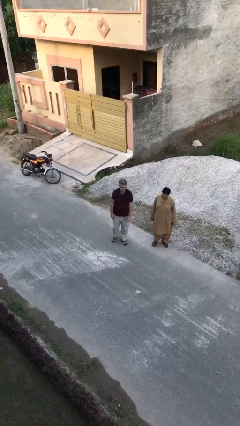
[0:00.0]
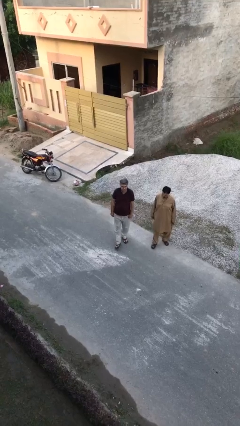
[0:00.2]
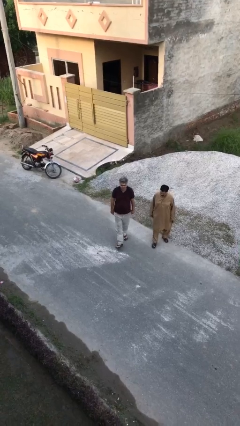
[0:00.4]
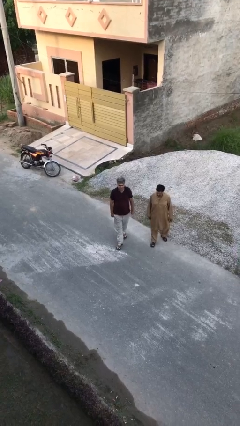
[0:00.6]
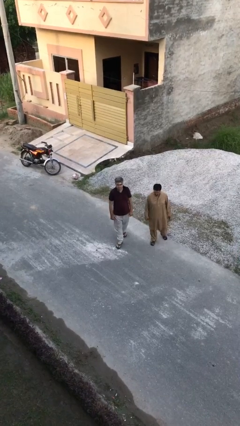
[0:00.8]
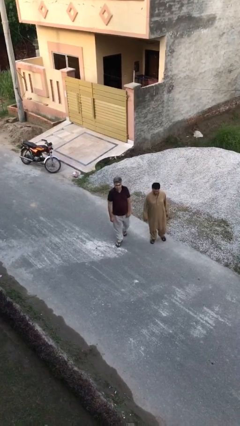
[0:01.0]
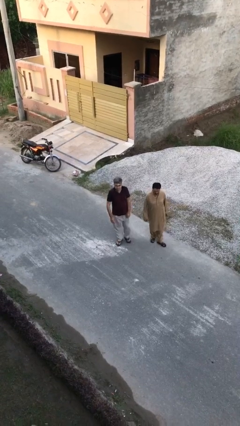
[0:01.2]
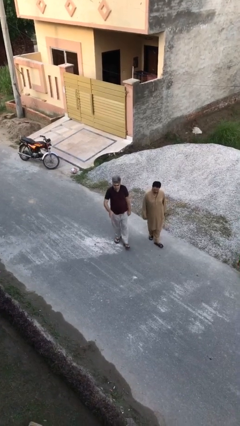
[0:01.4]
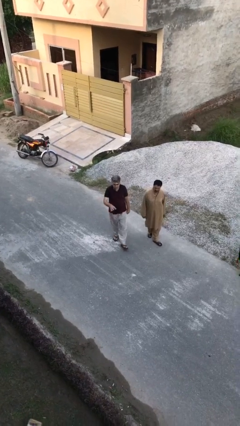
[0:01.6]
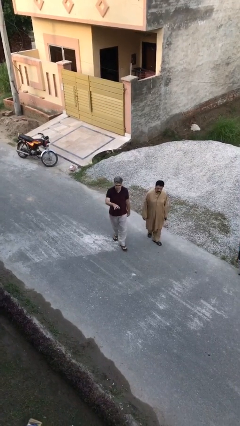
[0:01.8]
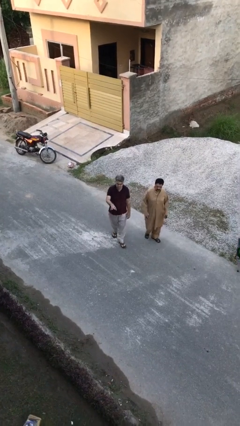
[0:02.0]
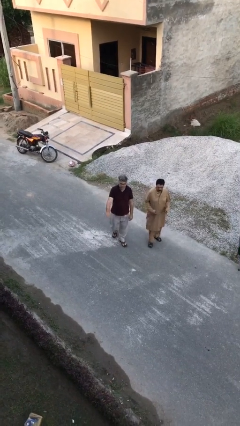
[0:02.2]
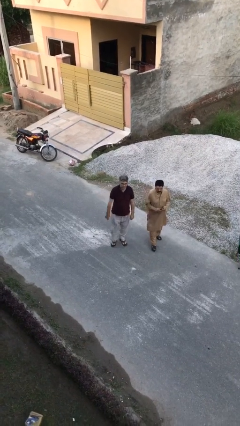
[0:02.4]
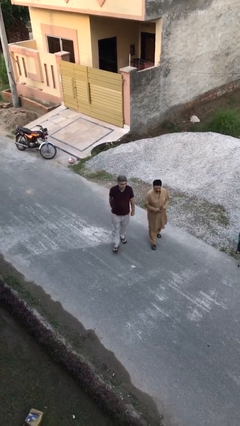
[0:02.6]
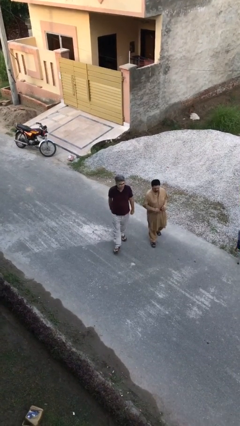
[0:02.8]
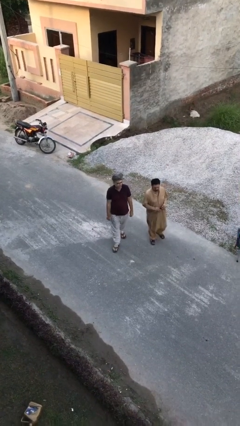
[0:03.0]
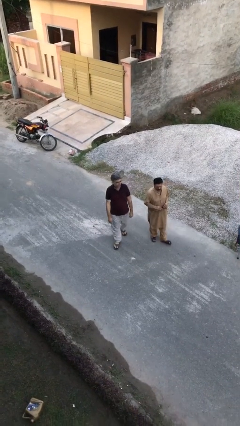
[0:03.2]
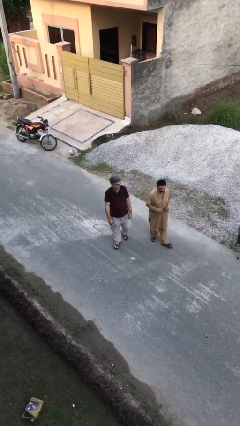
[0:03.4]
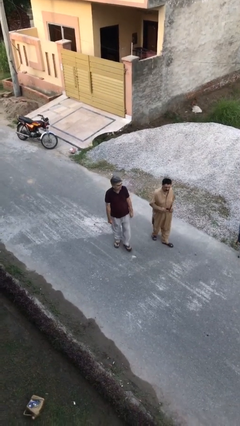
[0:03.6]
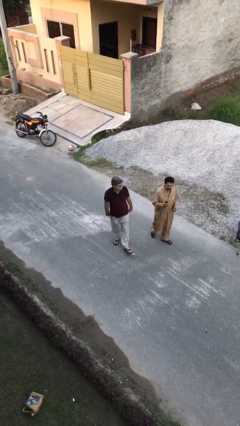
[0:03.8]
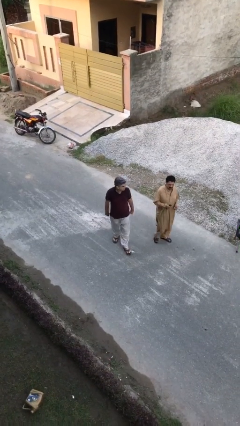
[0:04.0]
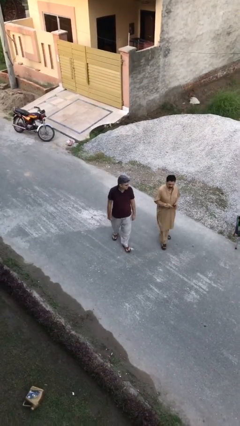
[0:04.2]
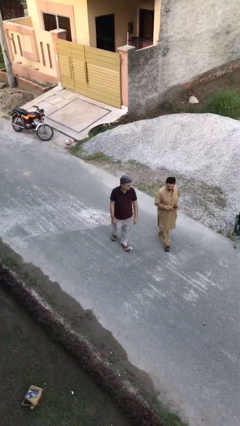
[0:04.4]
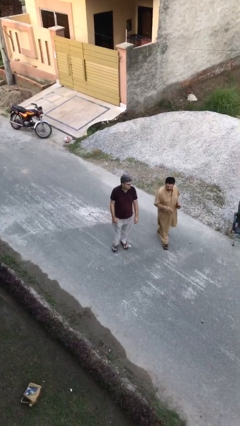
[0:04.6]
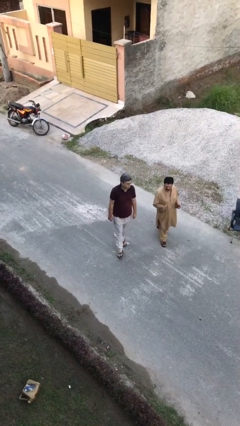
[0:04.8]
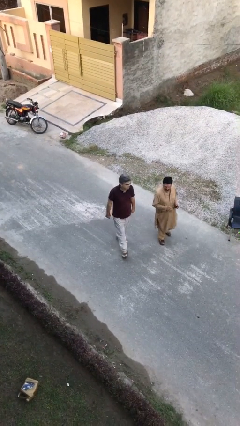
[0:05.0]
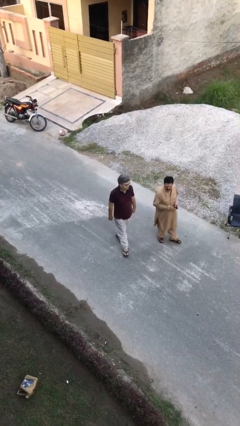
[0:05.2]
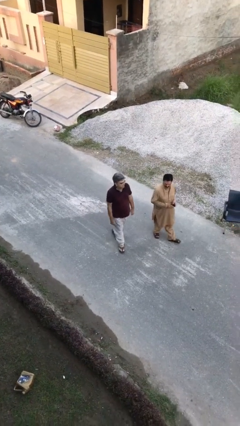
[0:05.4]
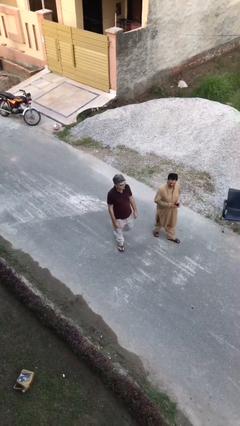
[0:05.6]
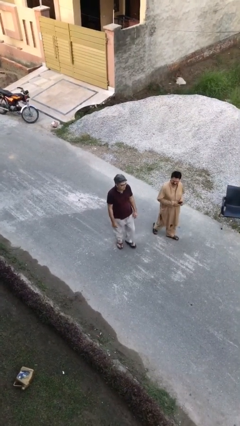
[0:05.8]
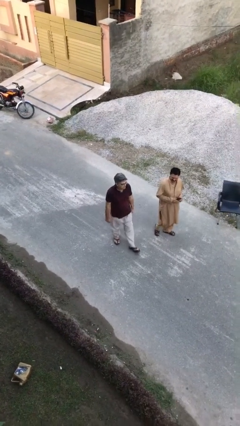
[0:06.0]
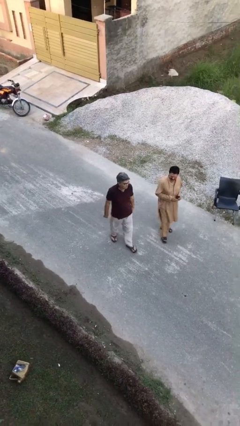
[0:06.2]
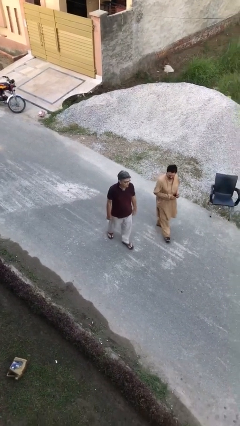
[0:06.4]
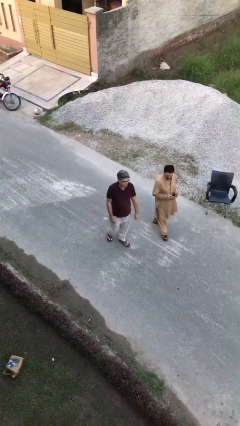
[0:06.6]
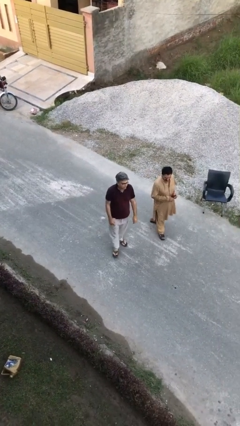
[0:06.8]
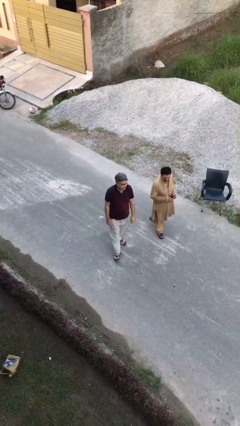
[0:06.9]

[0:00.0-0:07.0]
person talks to person

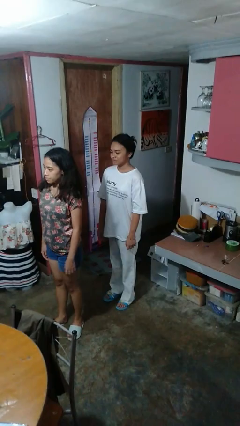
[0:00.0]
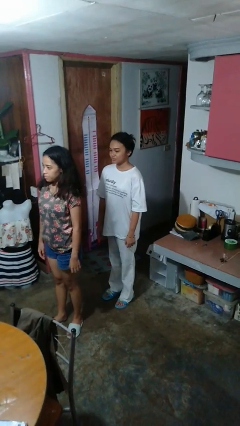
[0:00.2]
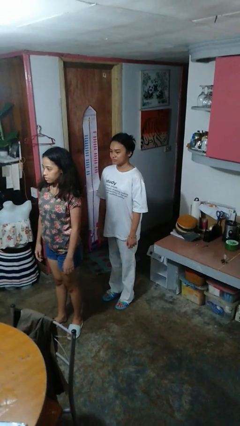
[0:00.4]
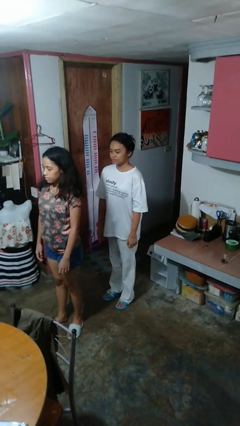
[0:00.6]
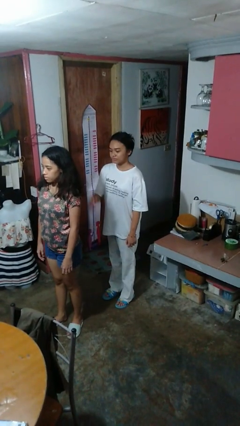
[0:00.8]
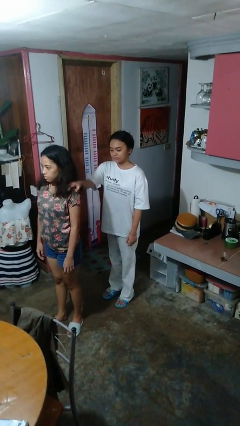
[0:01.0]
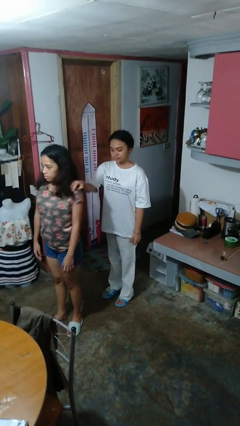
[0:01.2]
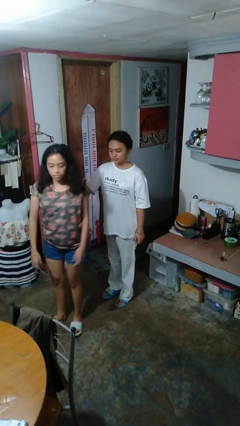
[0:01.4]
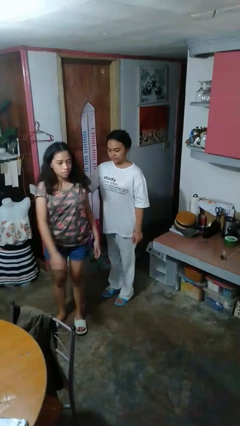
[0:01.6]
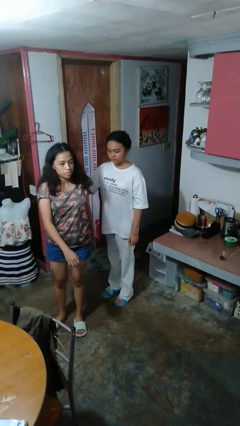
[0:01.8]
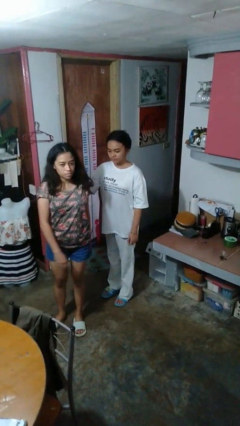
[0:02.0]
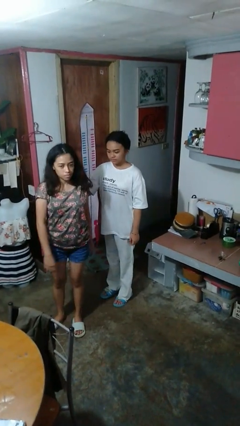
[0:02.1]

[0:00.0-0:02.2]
person grabs person by shoulder

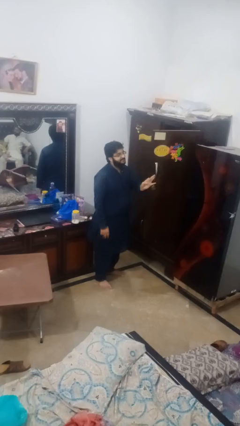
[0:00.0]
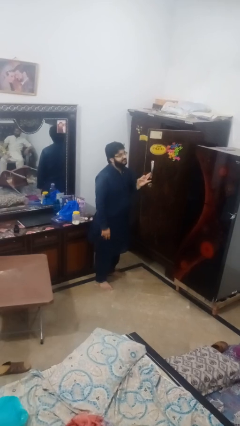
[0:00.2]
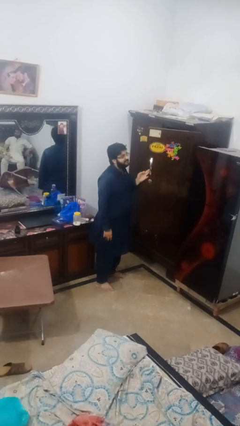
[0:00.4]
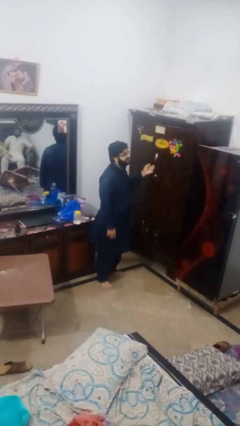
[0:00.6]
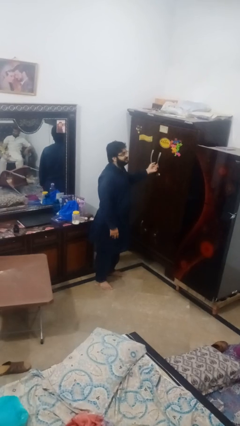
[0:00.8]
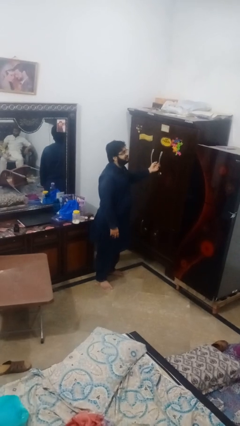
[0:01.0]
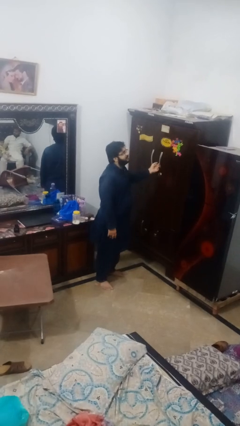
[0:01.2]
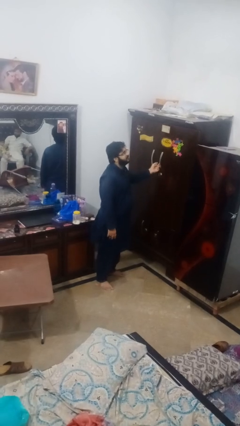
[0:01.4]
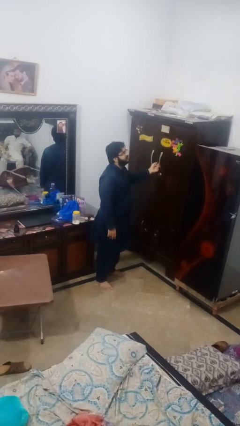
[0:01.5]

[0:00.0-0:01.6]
person closes closet door

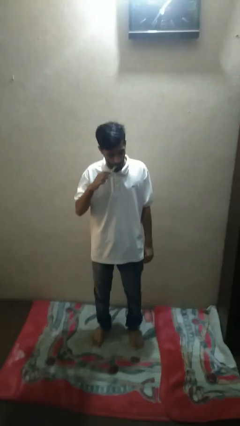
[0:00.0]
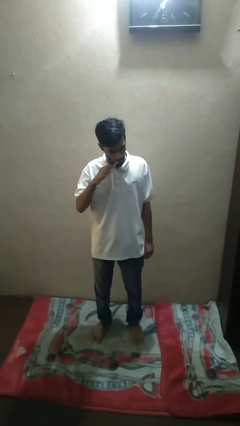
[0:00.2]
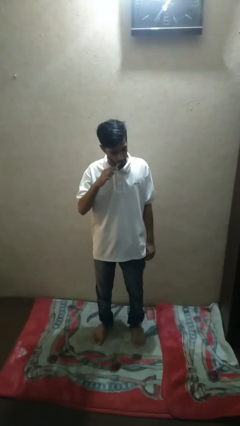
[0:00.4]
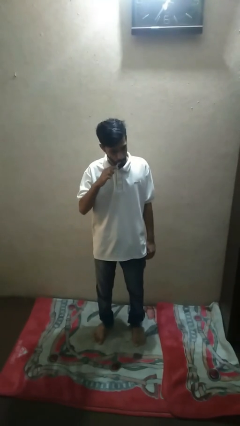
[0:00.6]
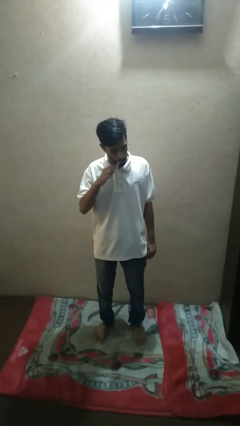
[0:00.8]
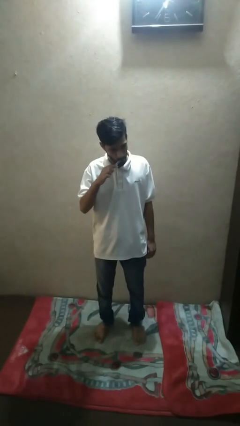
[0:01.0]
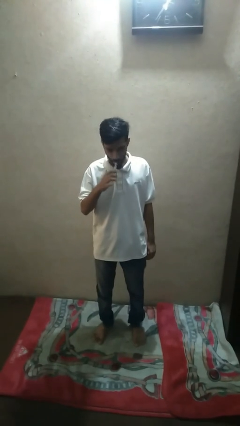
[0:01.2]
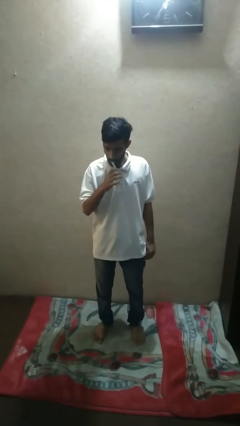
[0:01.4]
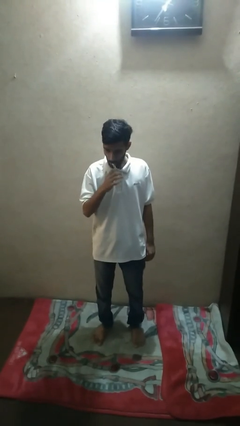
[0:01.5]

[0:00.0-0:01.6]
person brushes teeth

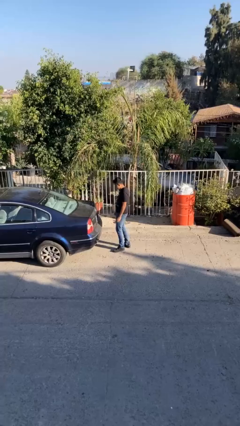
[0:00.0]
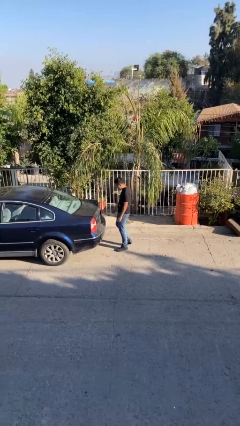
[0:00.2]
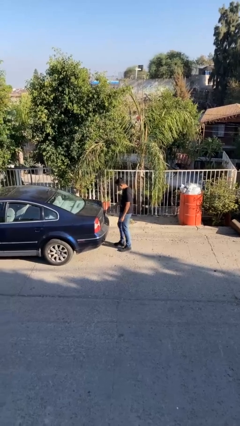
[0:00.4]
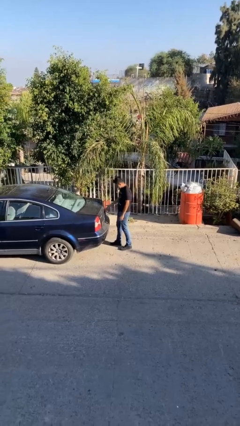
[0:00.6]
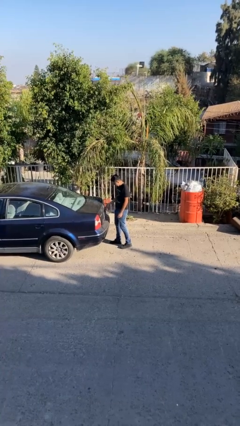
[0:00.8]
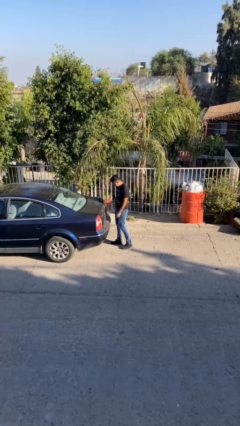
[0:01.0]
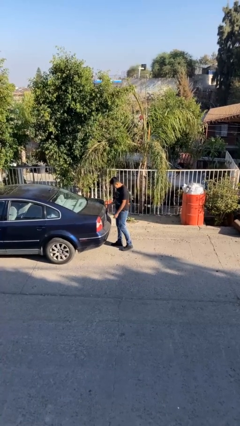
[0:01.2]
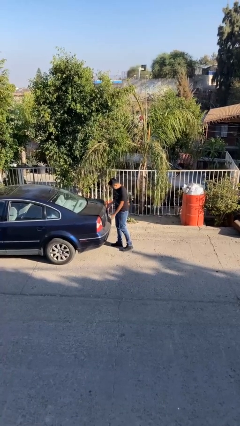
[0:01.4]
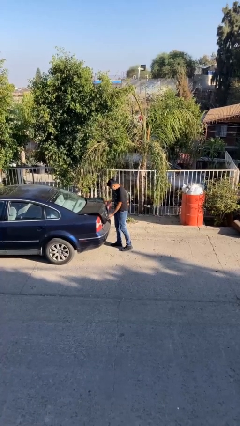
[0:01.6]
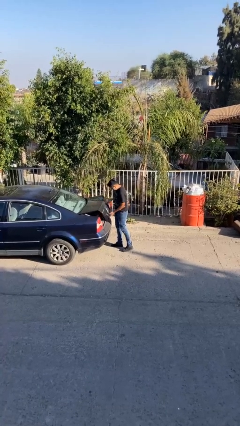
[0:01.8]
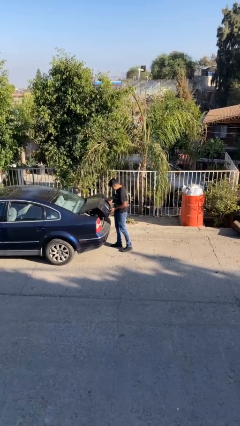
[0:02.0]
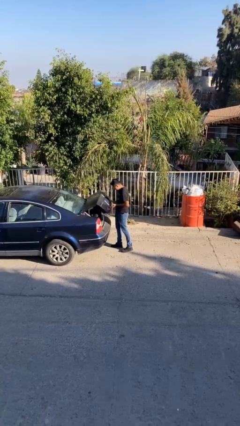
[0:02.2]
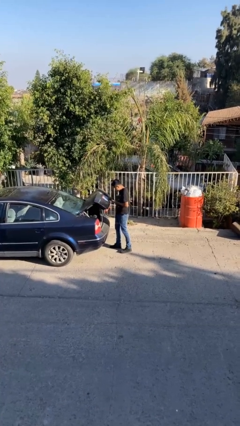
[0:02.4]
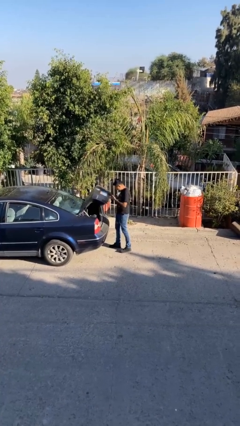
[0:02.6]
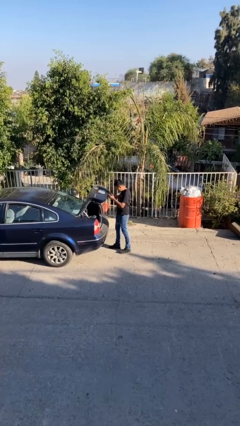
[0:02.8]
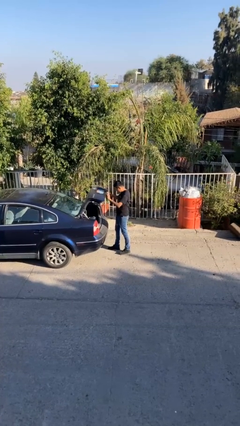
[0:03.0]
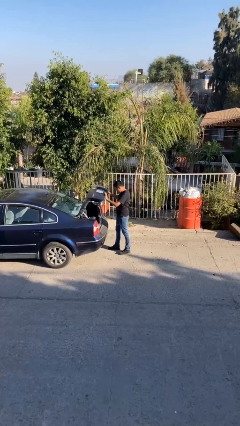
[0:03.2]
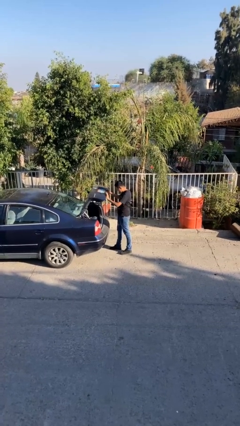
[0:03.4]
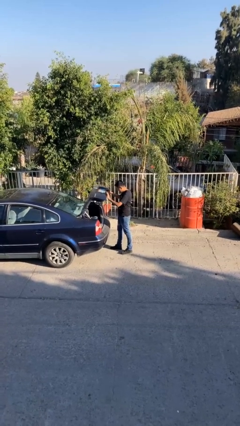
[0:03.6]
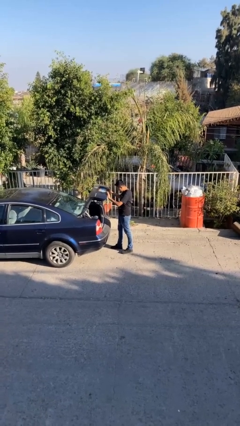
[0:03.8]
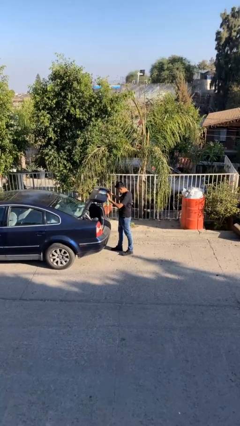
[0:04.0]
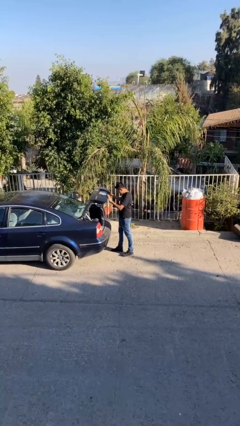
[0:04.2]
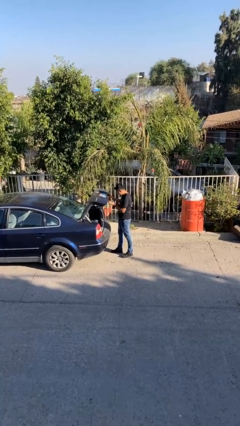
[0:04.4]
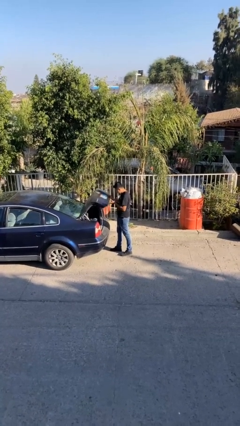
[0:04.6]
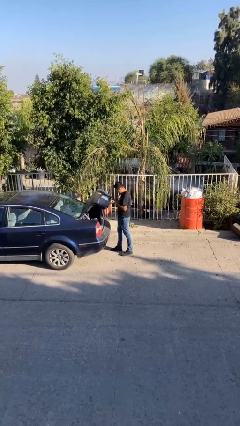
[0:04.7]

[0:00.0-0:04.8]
person opens car trunk

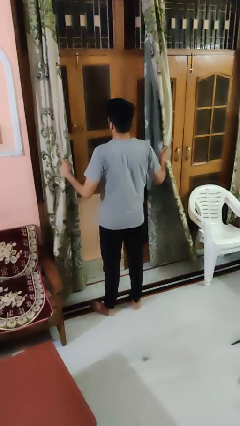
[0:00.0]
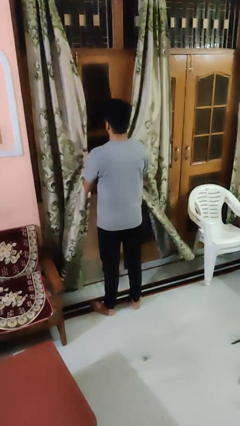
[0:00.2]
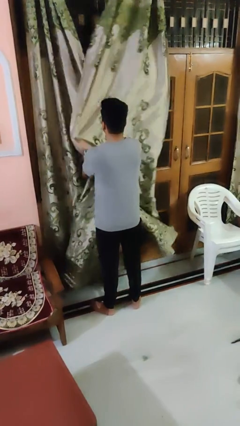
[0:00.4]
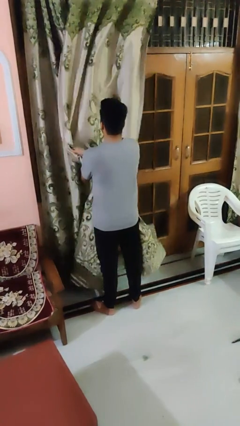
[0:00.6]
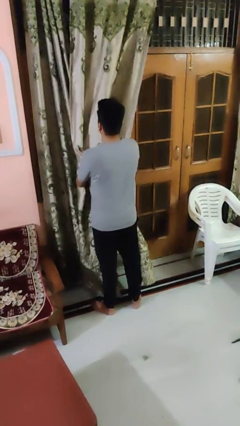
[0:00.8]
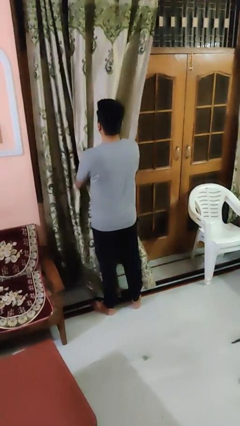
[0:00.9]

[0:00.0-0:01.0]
person closes curtains
